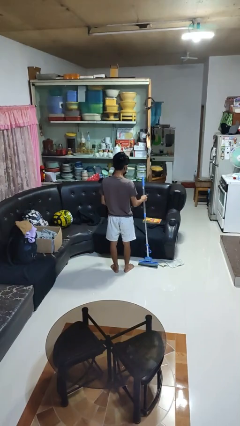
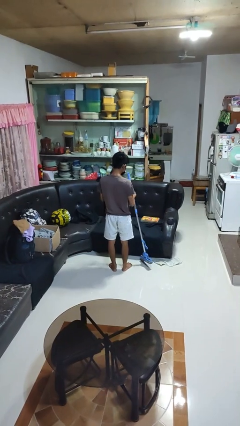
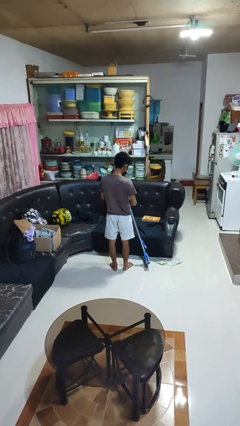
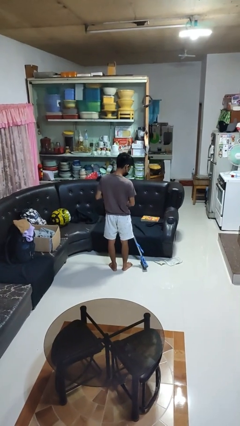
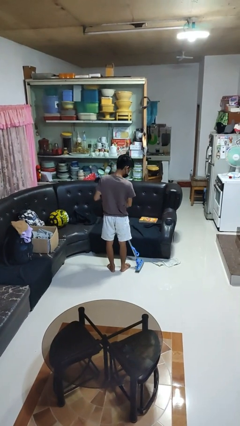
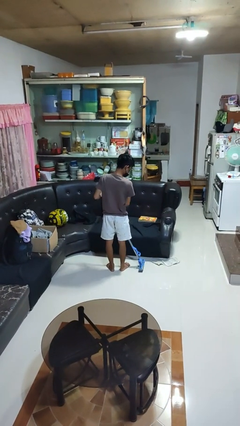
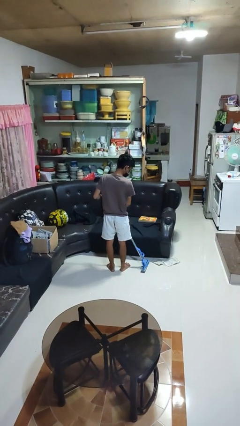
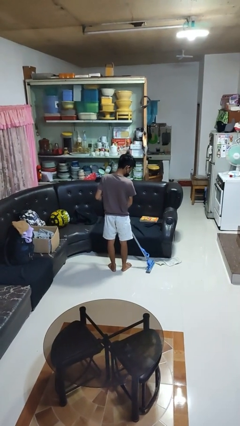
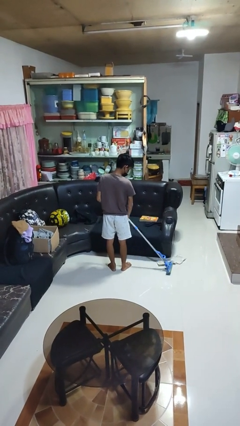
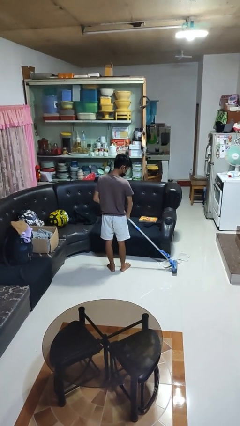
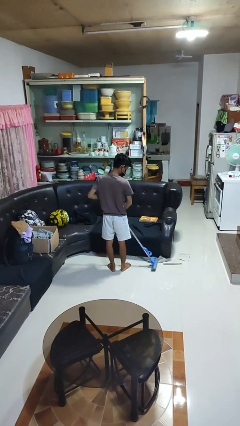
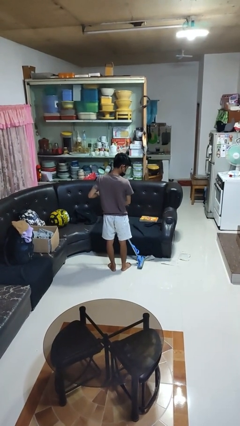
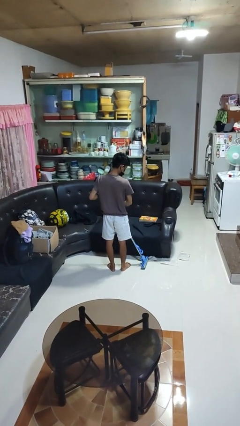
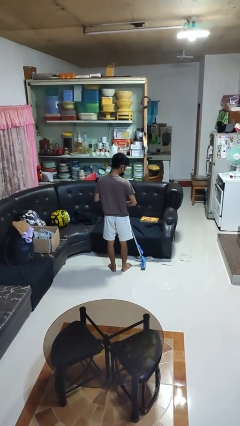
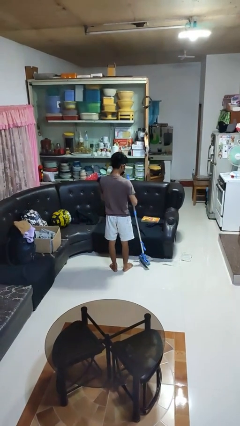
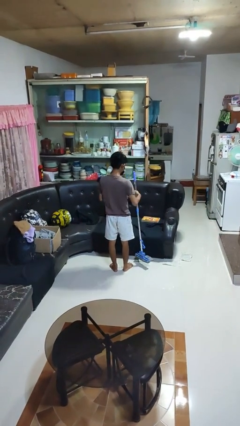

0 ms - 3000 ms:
person mops

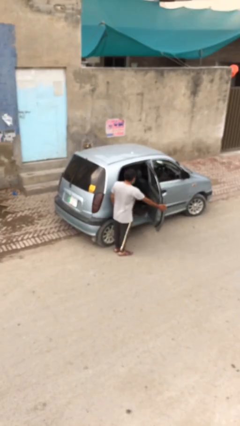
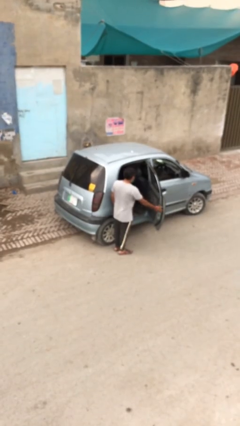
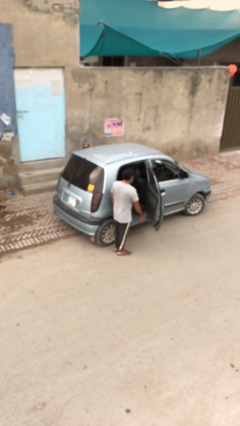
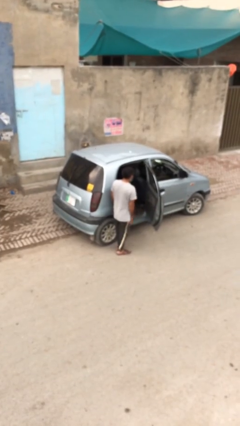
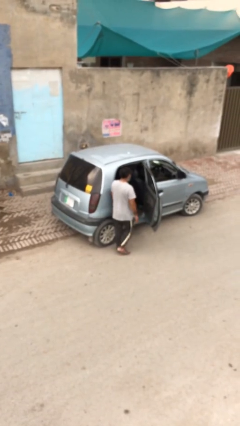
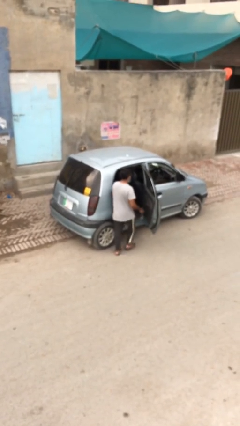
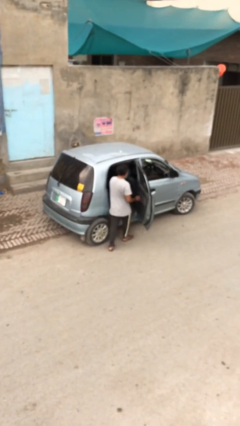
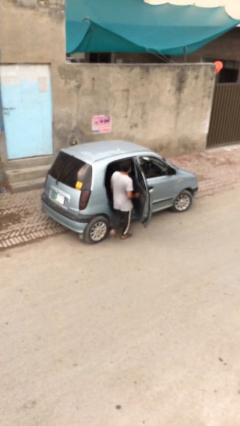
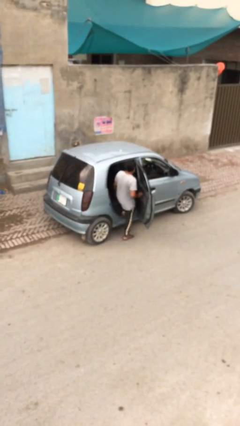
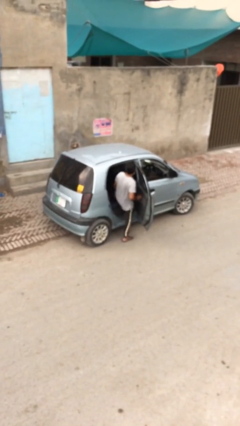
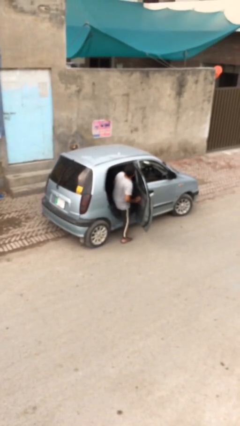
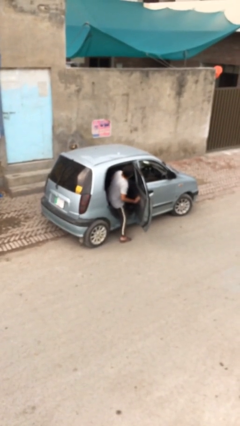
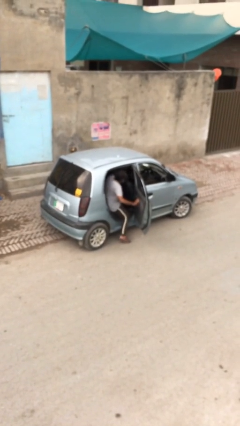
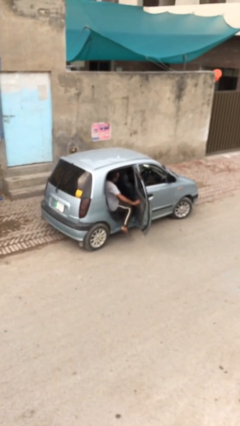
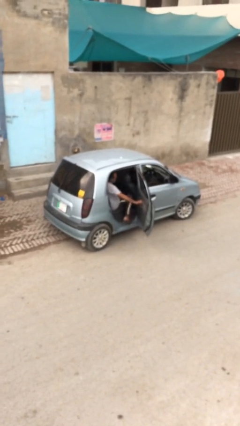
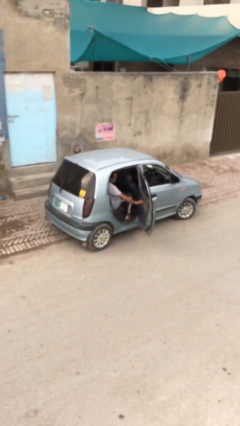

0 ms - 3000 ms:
person enters car

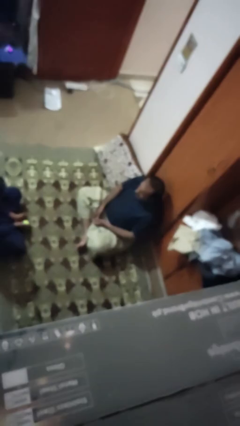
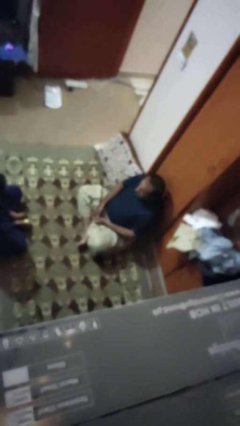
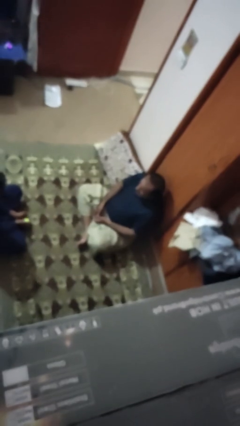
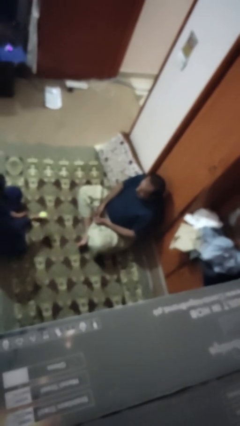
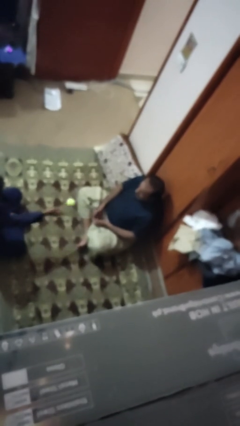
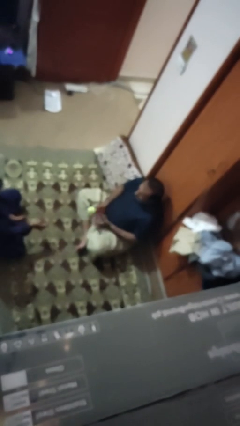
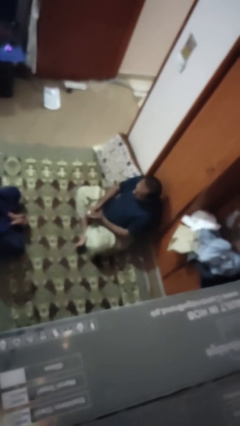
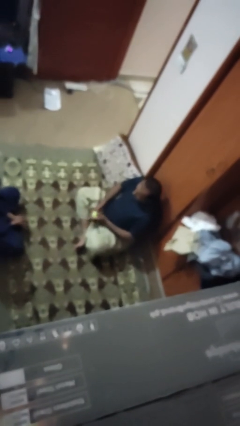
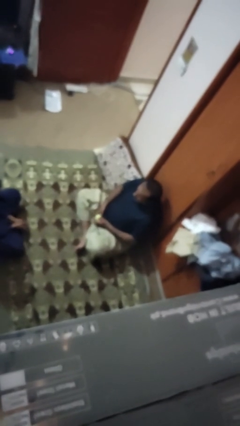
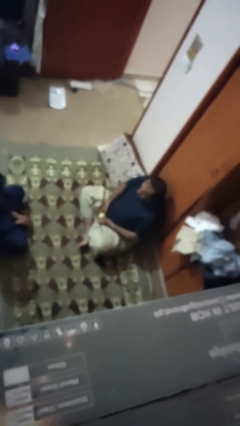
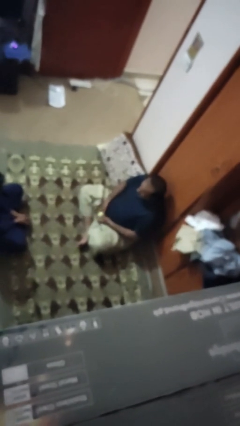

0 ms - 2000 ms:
person catches object from person

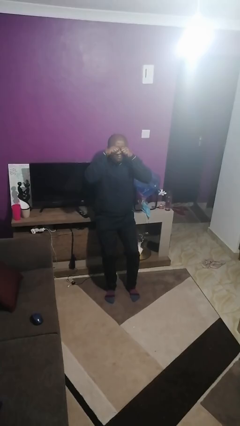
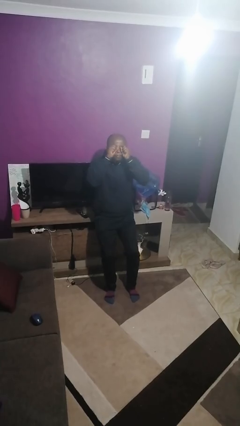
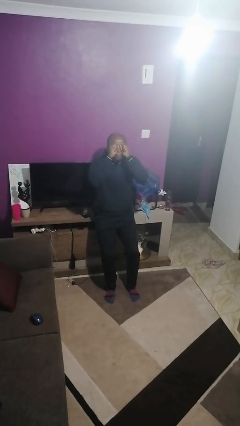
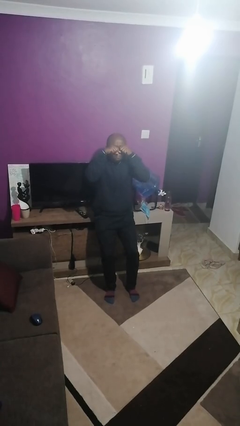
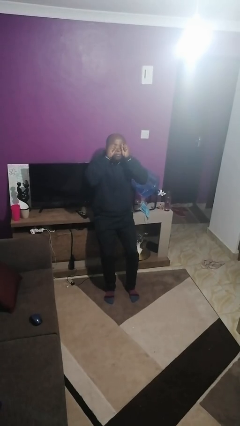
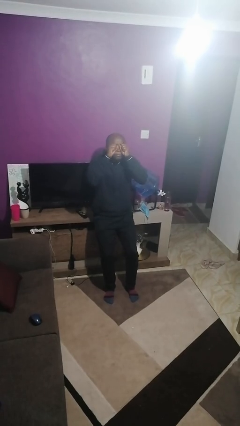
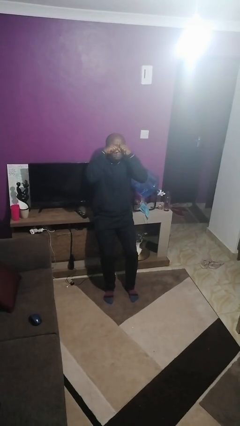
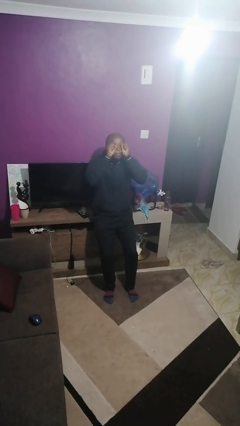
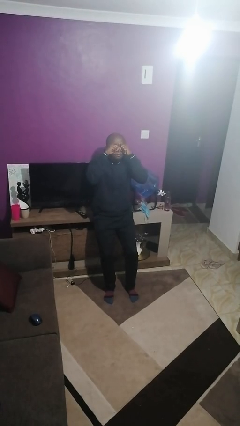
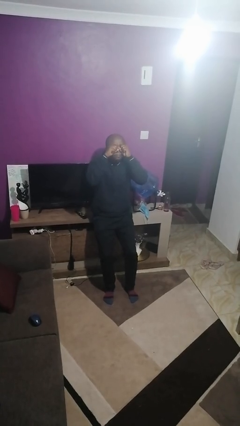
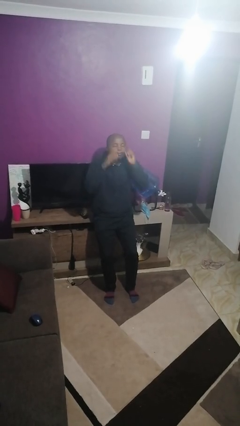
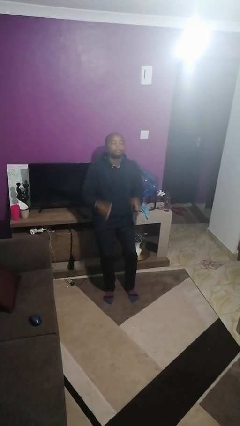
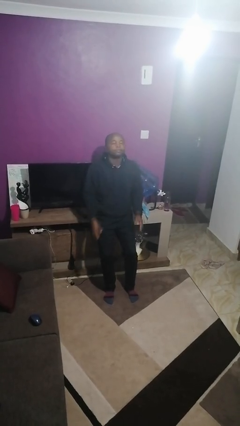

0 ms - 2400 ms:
person rubs eyes

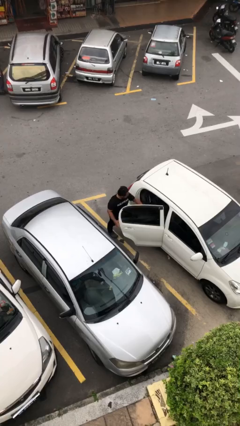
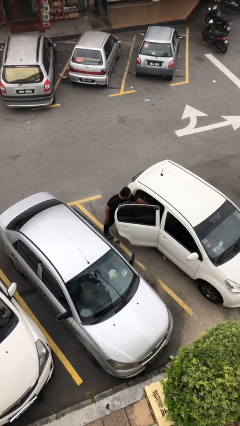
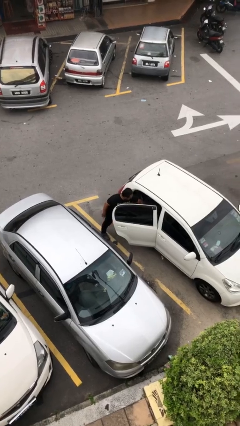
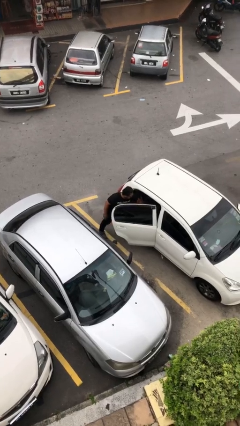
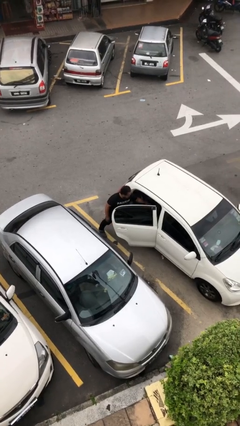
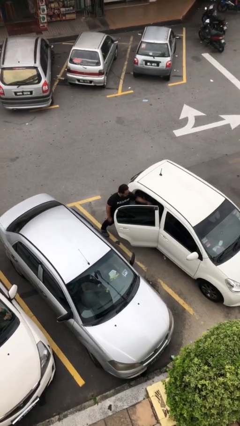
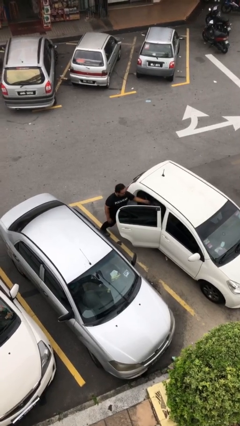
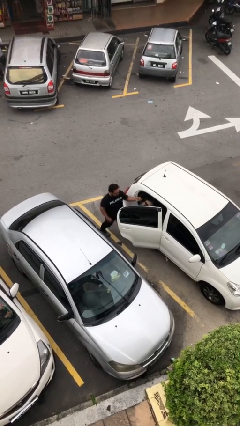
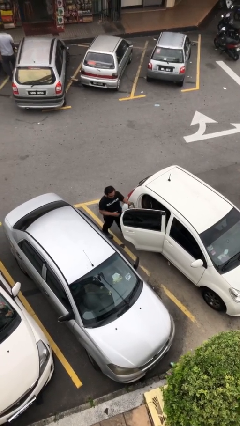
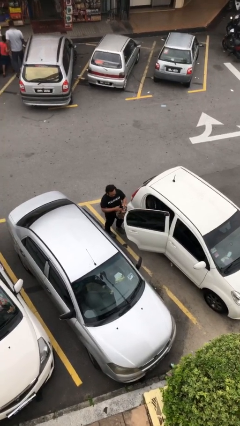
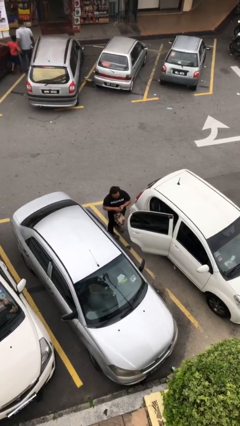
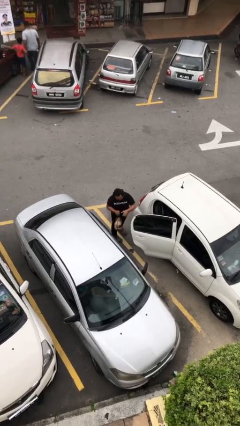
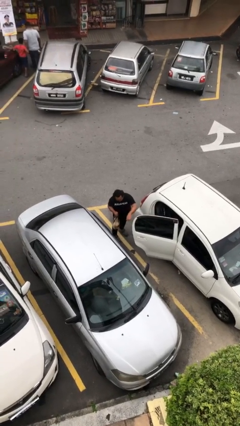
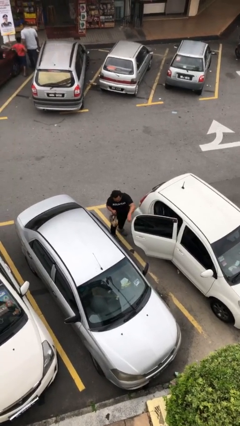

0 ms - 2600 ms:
person unloads car

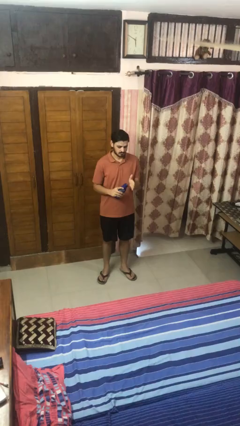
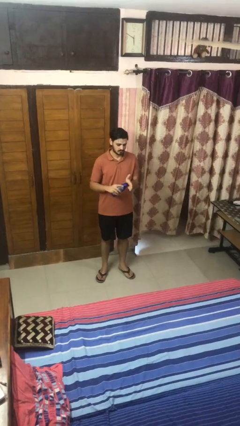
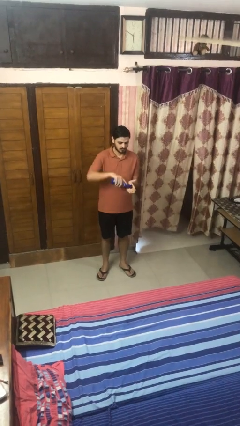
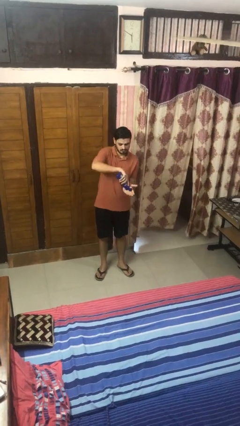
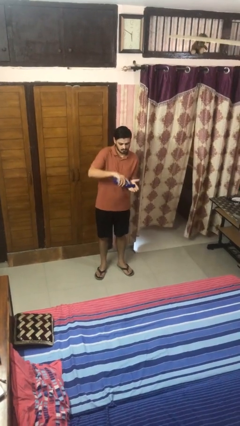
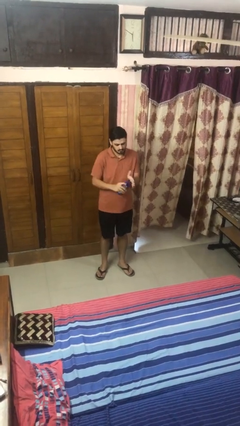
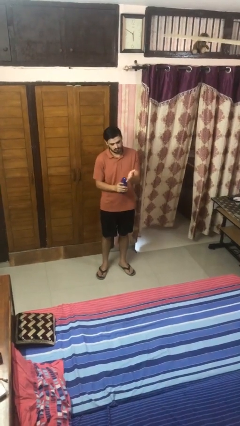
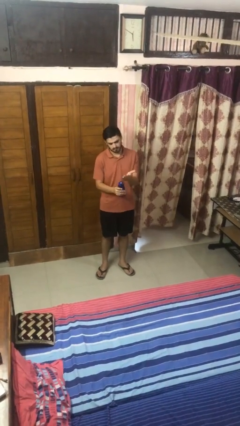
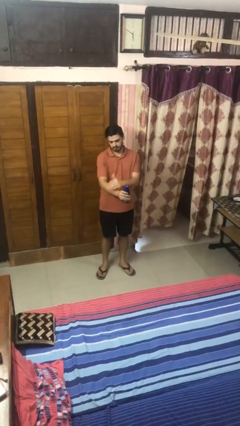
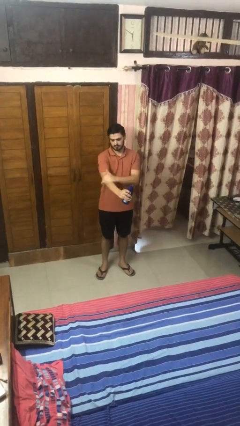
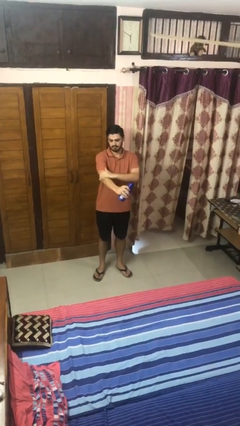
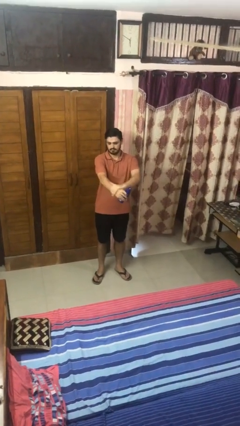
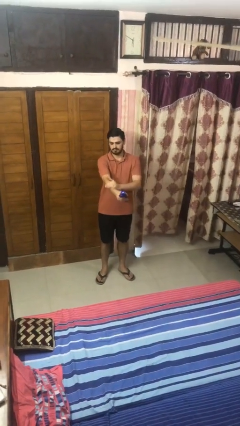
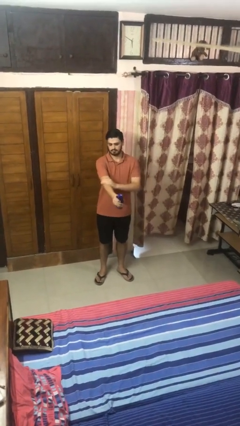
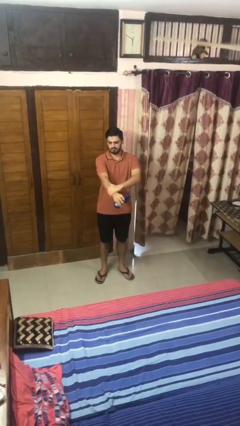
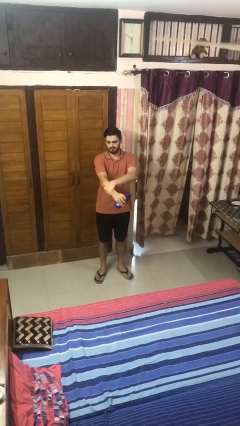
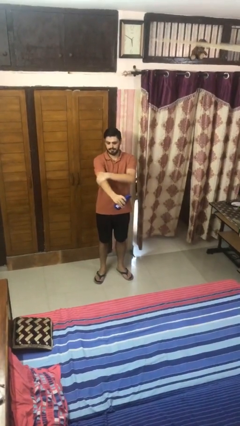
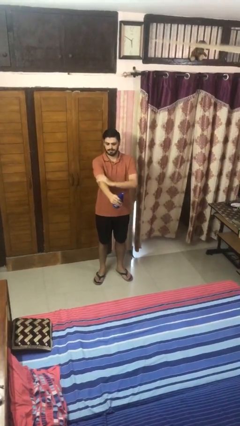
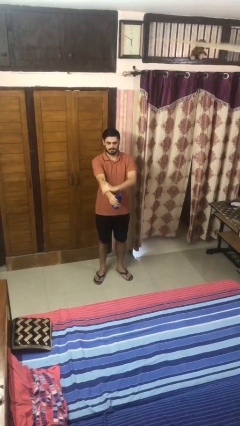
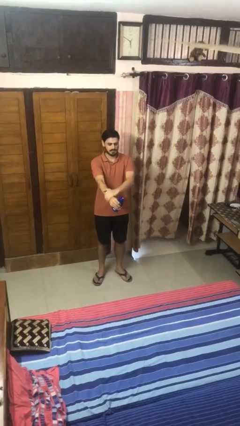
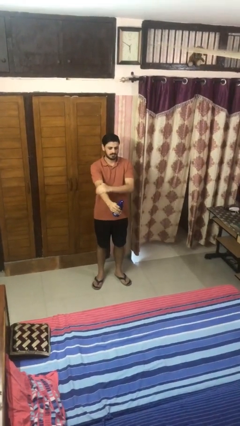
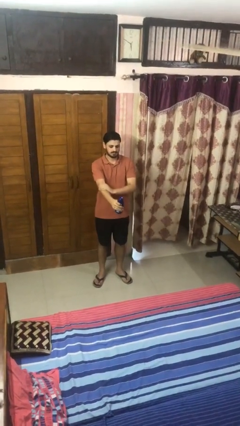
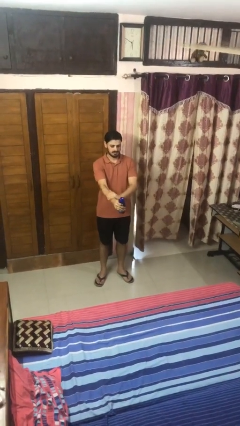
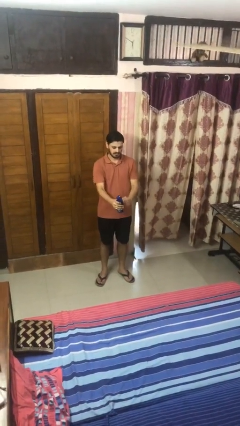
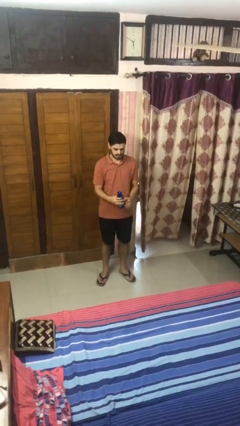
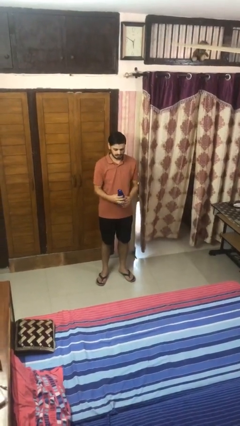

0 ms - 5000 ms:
person applies sunscreen
